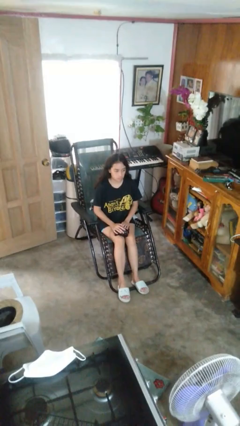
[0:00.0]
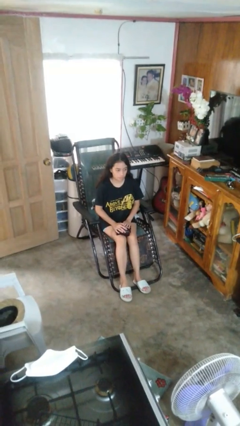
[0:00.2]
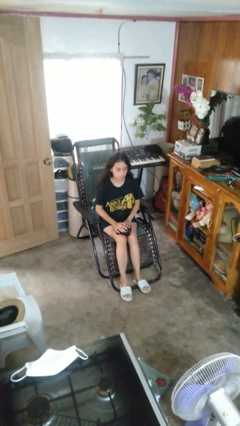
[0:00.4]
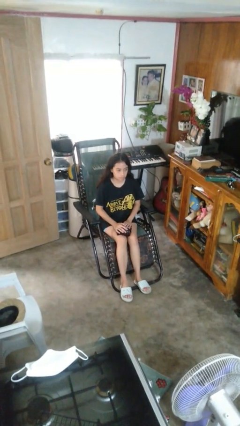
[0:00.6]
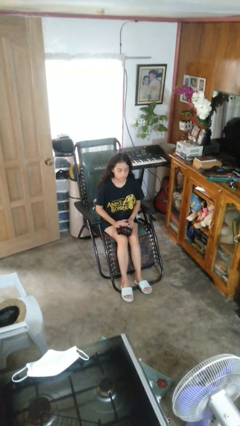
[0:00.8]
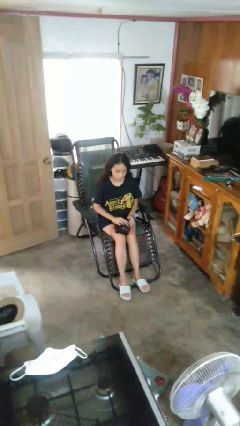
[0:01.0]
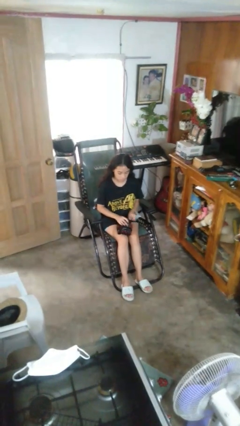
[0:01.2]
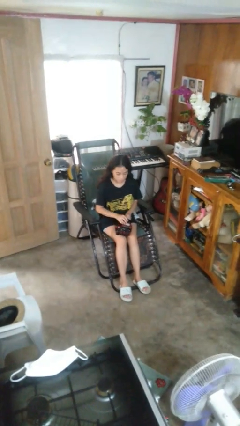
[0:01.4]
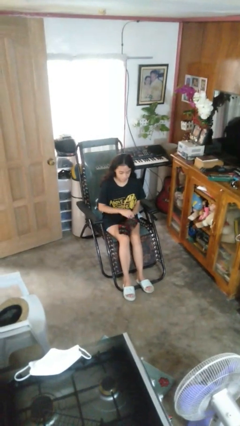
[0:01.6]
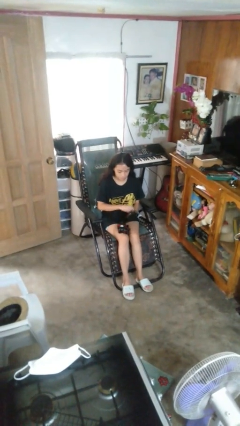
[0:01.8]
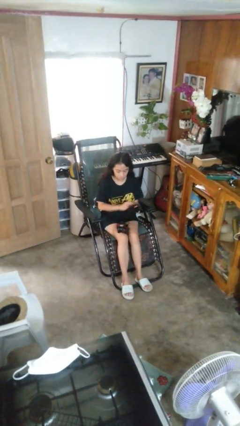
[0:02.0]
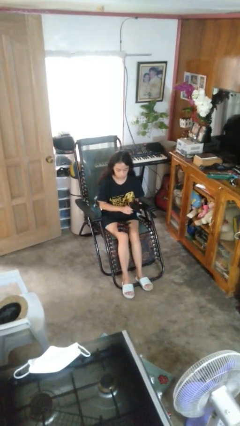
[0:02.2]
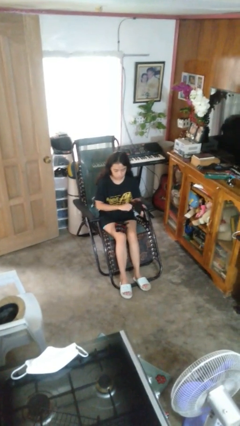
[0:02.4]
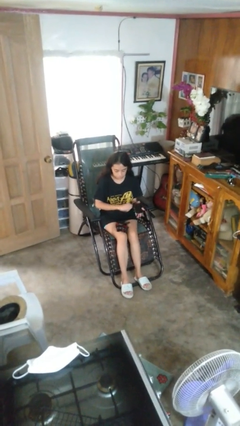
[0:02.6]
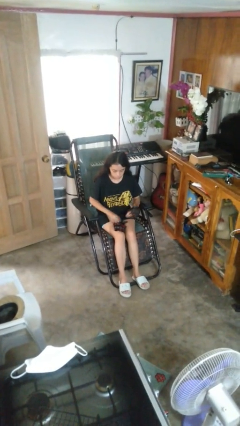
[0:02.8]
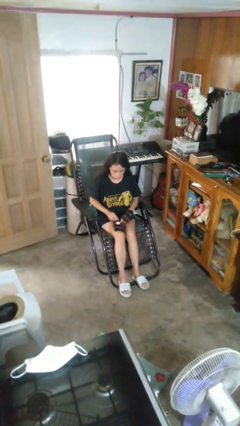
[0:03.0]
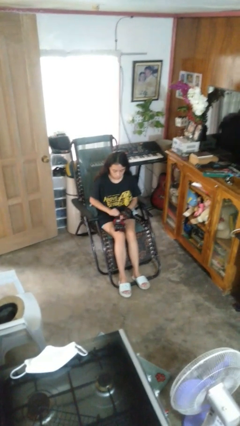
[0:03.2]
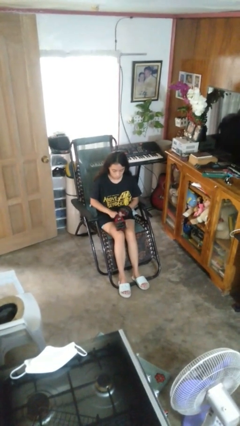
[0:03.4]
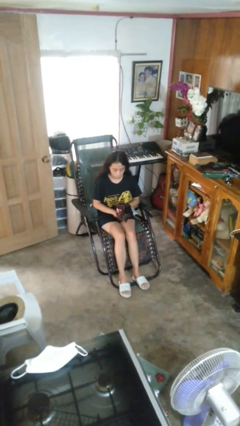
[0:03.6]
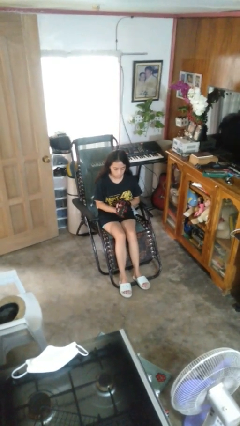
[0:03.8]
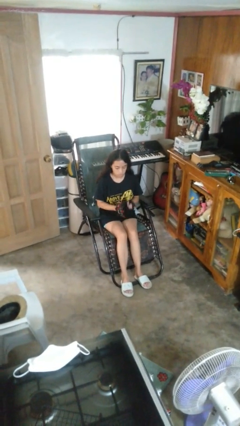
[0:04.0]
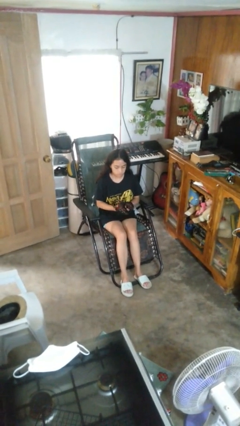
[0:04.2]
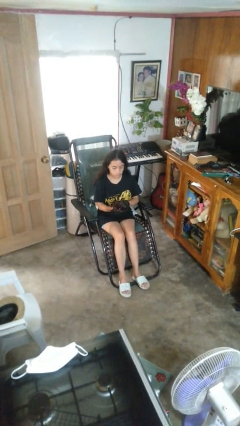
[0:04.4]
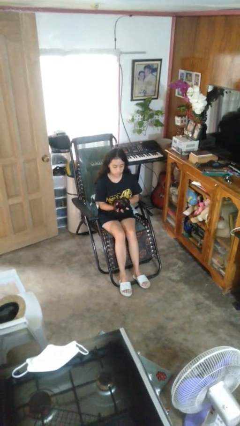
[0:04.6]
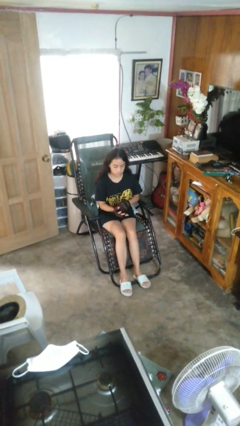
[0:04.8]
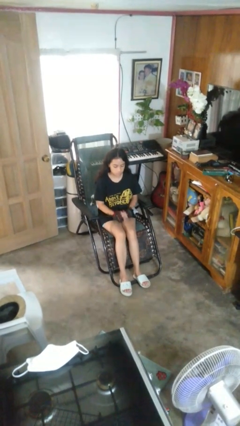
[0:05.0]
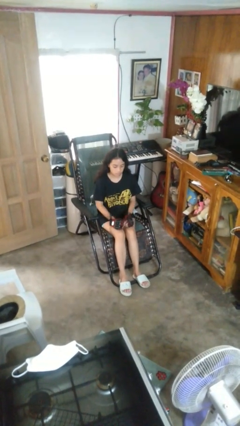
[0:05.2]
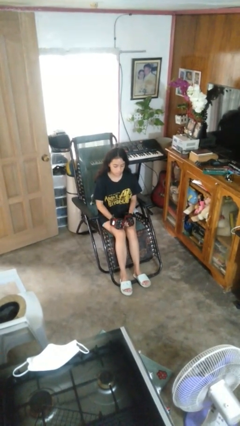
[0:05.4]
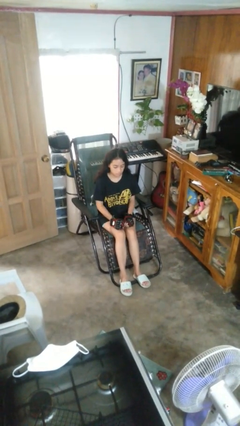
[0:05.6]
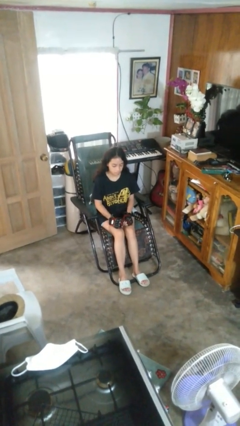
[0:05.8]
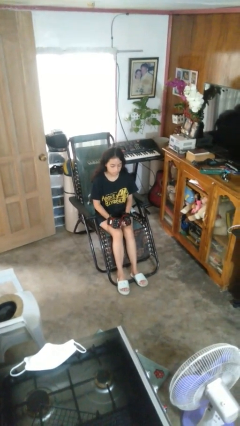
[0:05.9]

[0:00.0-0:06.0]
person puts on gloves

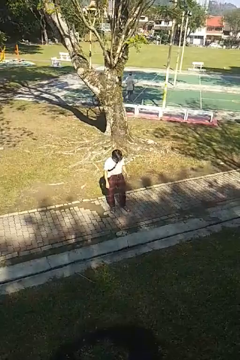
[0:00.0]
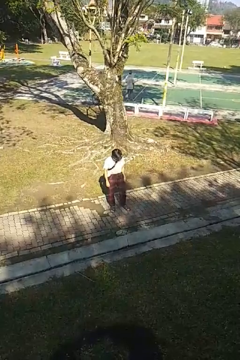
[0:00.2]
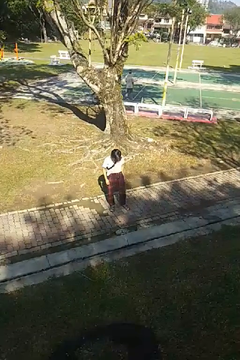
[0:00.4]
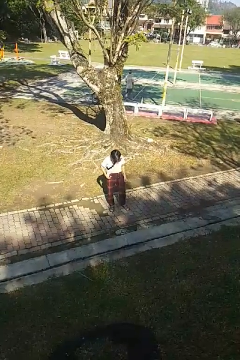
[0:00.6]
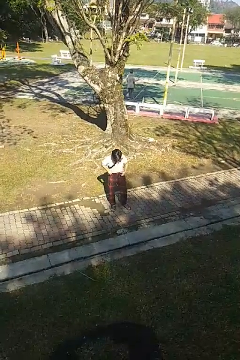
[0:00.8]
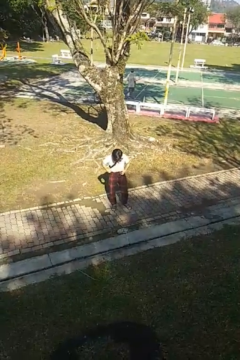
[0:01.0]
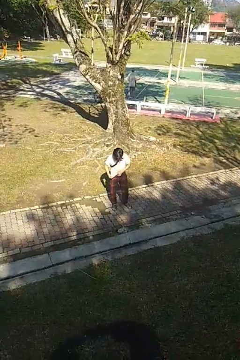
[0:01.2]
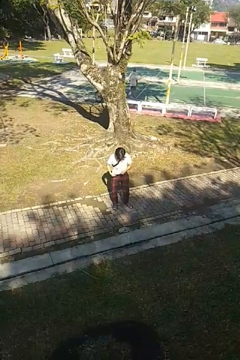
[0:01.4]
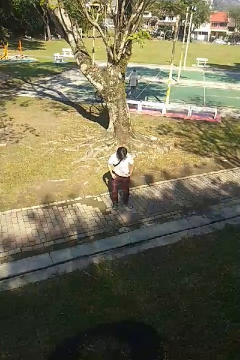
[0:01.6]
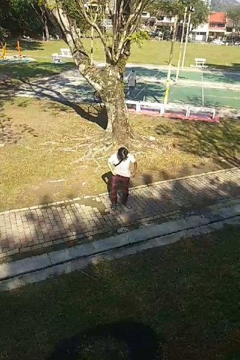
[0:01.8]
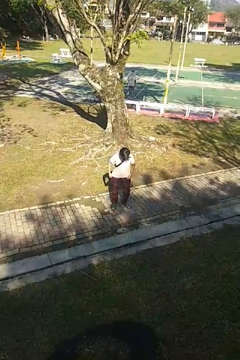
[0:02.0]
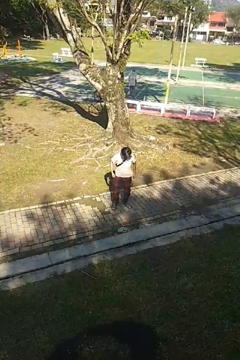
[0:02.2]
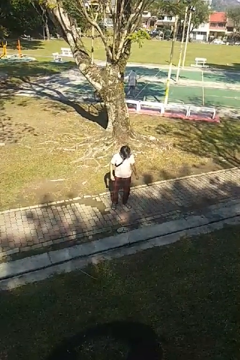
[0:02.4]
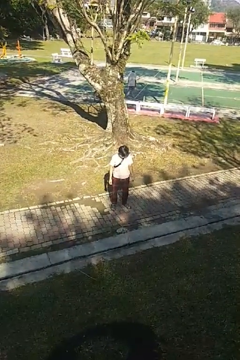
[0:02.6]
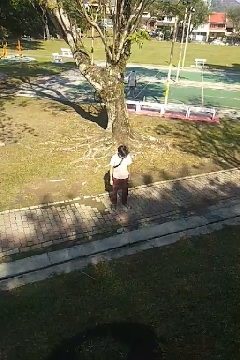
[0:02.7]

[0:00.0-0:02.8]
person untucks shirt

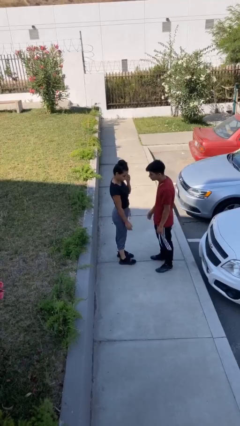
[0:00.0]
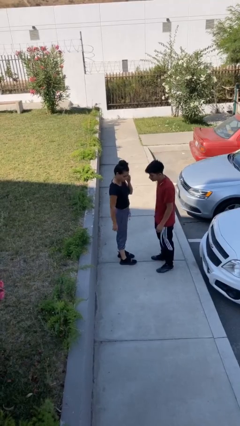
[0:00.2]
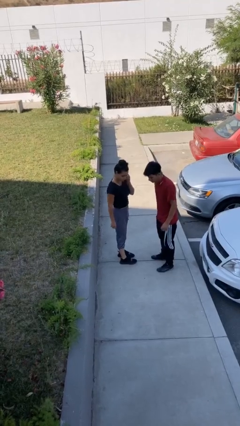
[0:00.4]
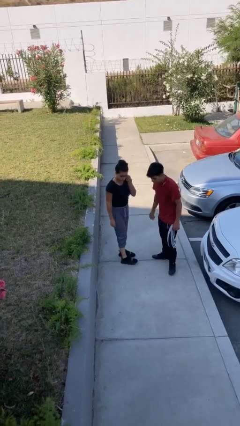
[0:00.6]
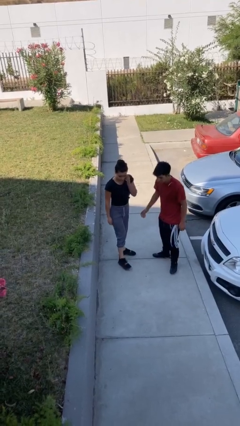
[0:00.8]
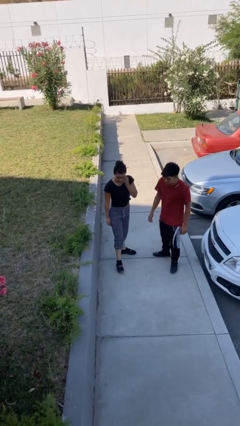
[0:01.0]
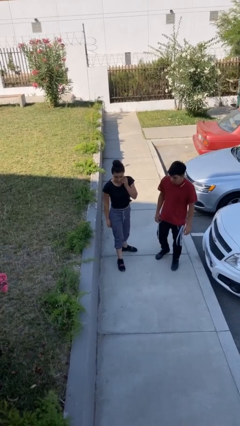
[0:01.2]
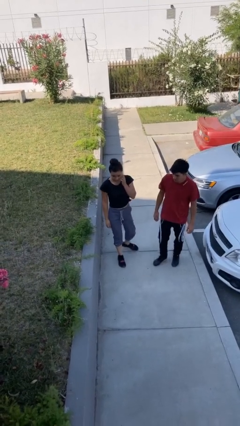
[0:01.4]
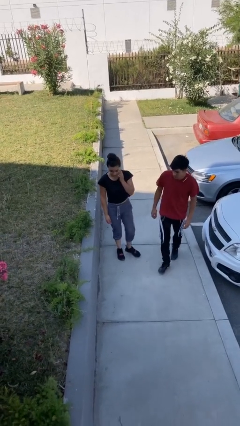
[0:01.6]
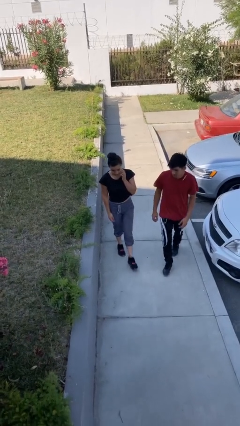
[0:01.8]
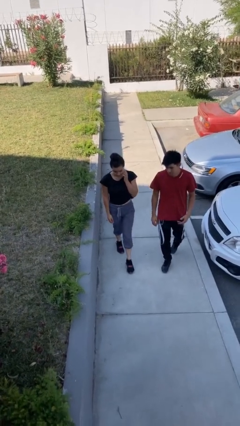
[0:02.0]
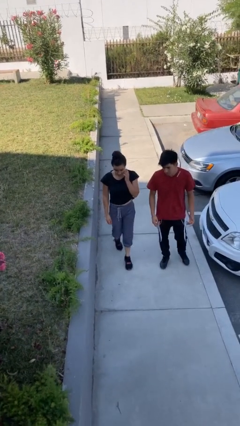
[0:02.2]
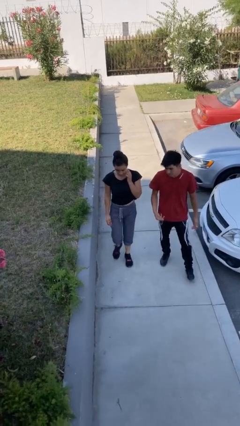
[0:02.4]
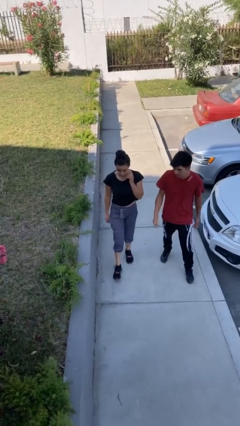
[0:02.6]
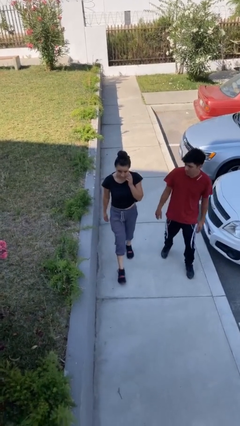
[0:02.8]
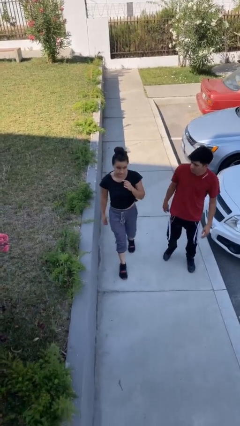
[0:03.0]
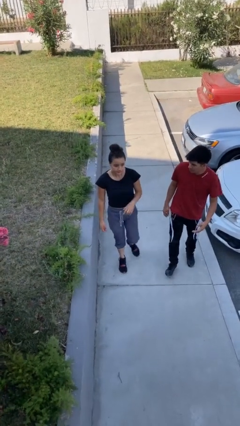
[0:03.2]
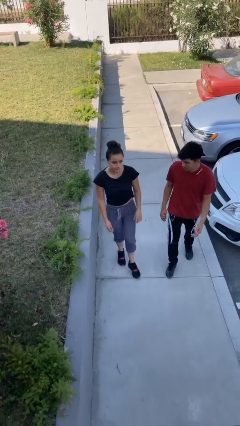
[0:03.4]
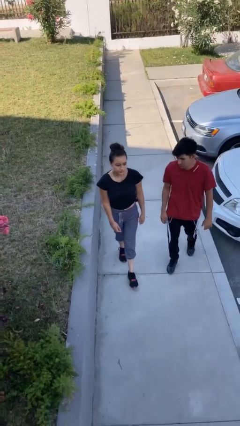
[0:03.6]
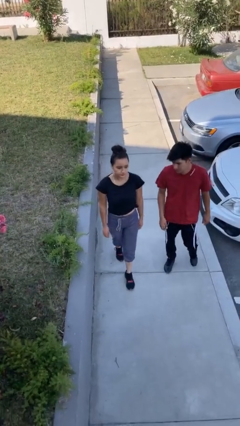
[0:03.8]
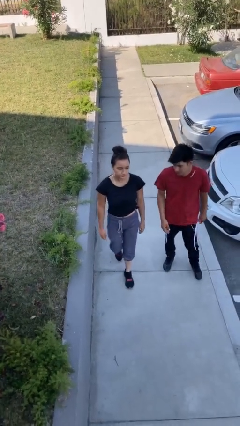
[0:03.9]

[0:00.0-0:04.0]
person talks to person

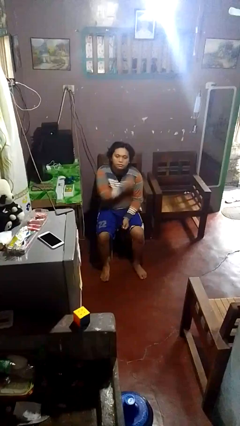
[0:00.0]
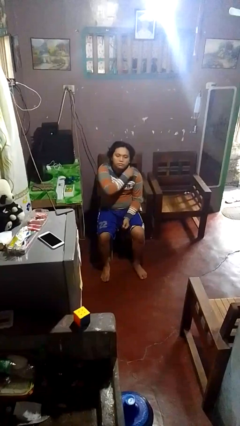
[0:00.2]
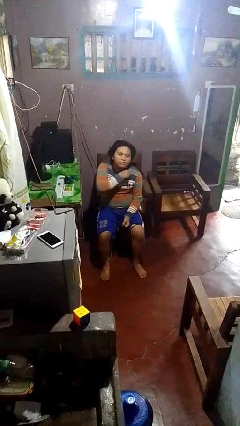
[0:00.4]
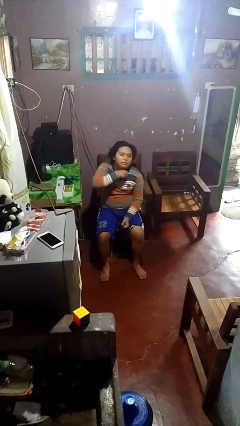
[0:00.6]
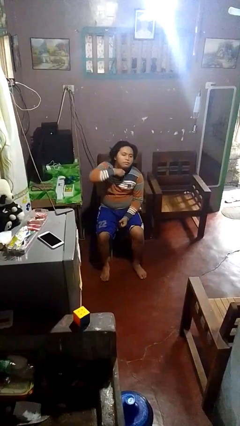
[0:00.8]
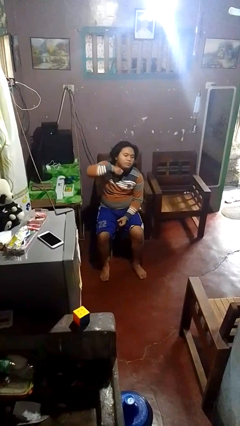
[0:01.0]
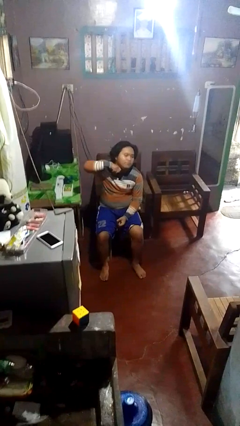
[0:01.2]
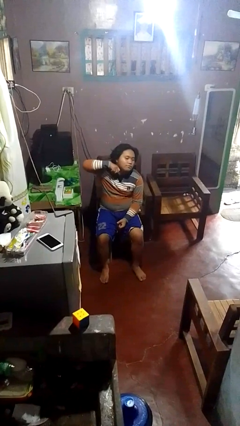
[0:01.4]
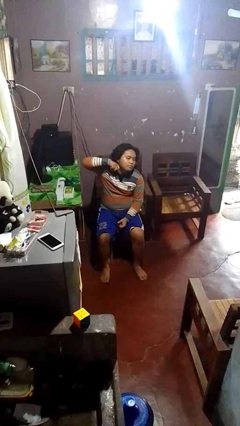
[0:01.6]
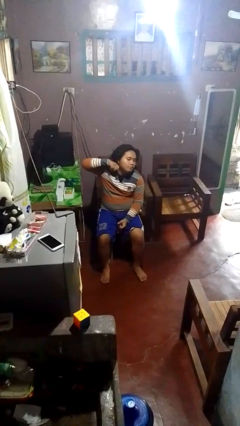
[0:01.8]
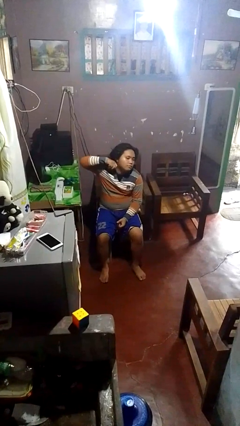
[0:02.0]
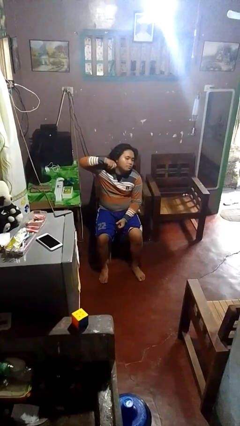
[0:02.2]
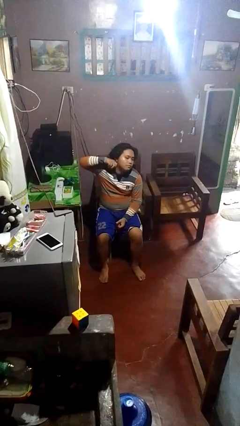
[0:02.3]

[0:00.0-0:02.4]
person gestures cut

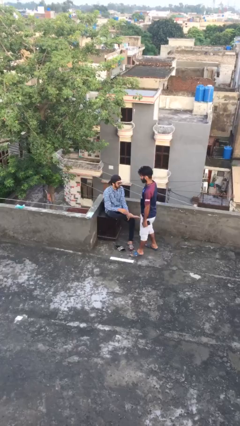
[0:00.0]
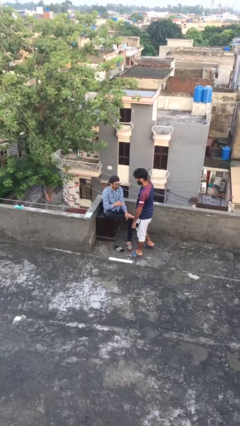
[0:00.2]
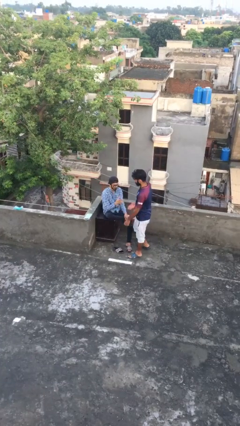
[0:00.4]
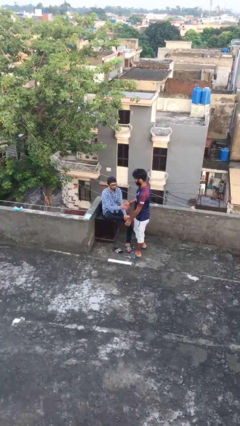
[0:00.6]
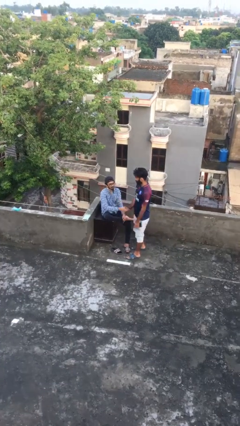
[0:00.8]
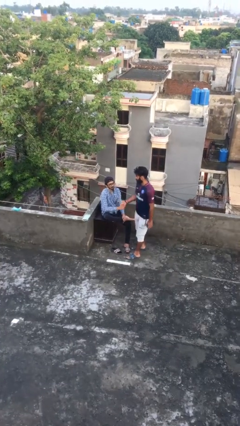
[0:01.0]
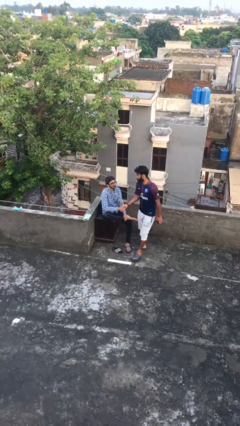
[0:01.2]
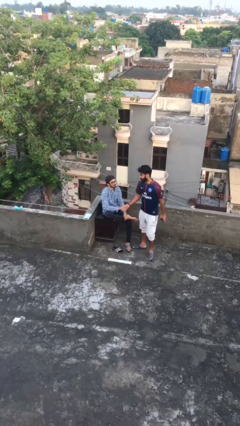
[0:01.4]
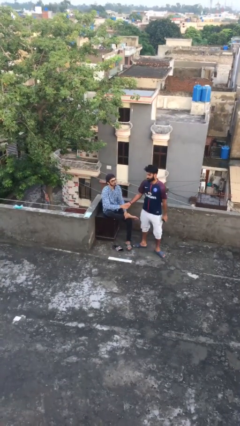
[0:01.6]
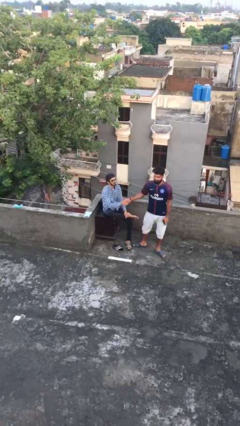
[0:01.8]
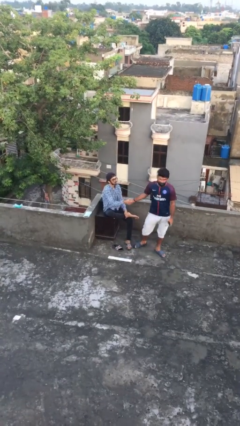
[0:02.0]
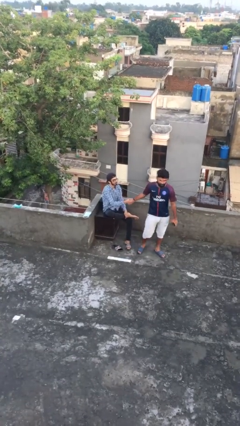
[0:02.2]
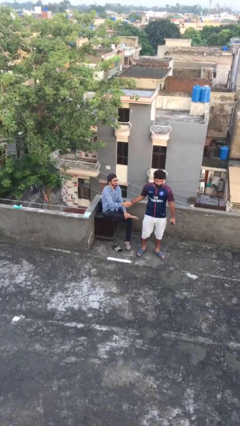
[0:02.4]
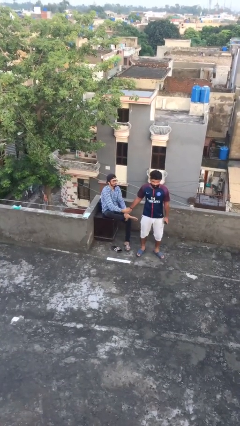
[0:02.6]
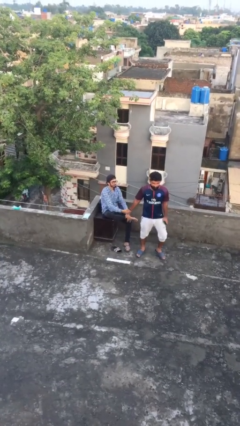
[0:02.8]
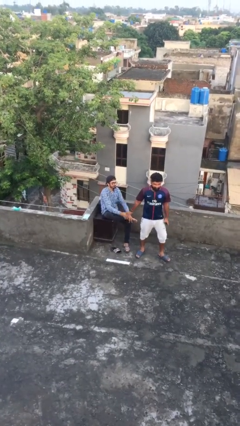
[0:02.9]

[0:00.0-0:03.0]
person shakes hand
